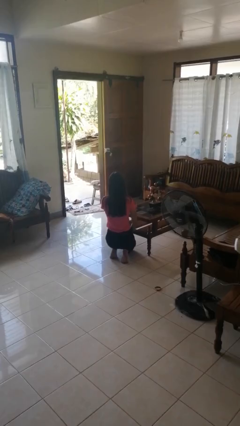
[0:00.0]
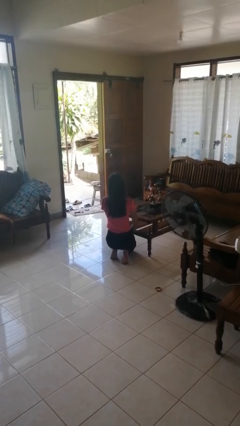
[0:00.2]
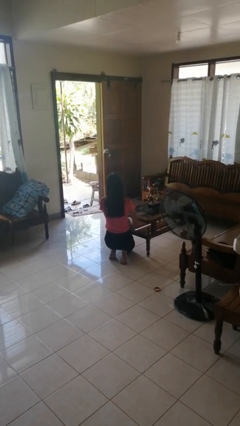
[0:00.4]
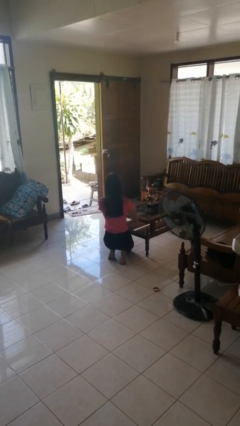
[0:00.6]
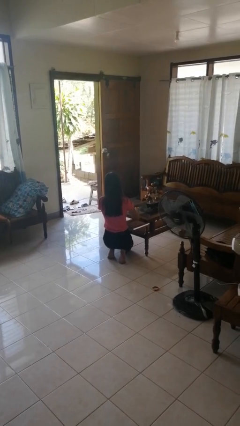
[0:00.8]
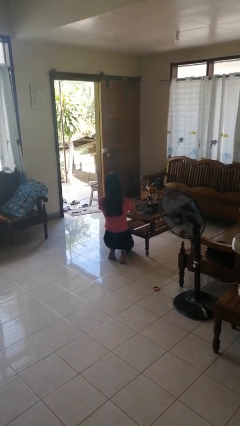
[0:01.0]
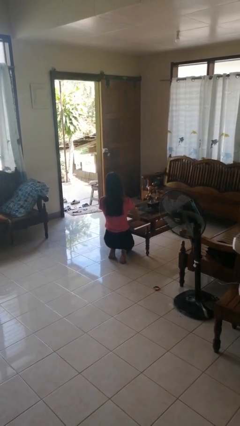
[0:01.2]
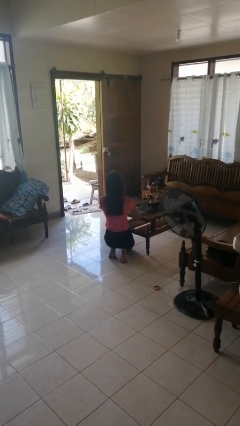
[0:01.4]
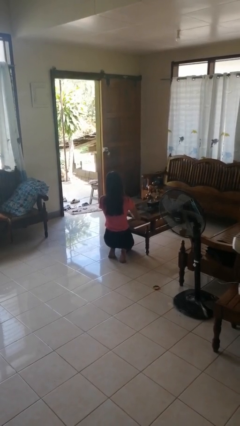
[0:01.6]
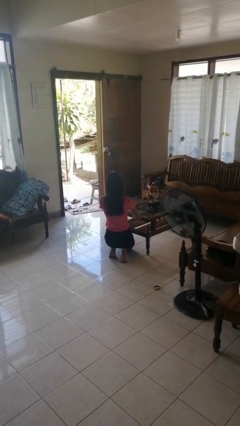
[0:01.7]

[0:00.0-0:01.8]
person cleans table with rag

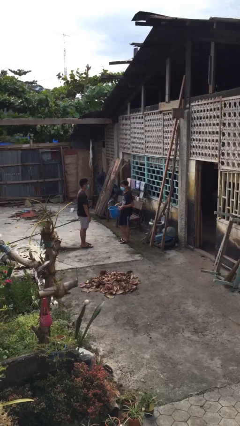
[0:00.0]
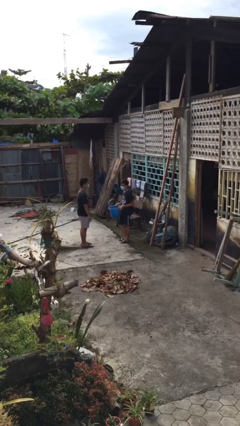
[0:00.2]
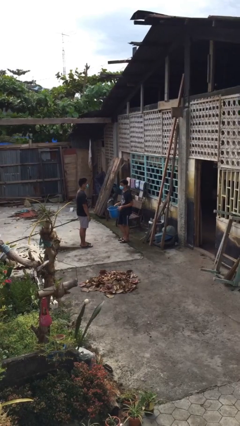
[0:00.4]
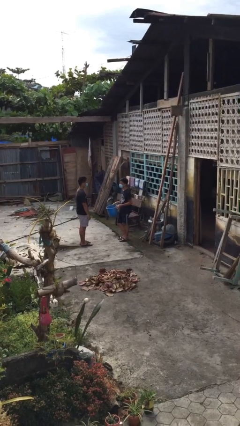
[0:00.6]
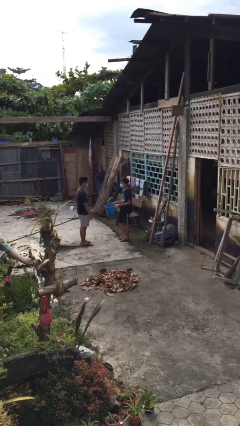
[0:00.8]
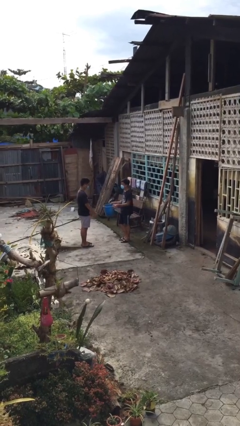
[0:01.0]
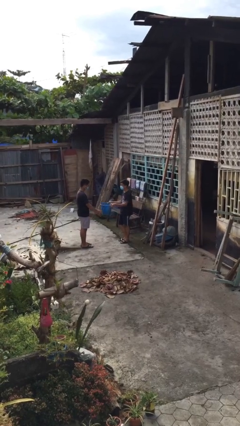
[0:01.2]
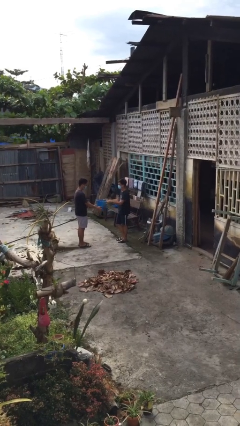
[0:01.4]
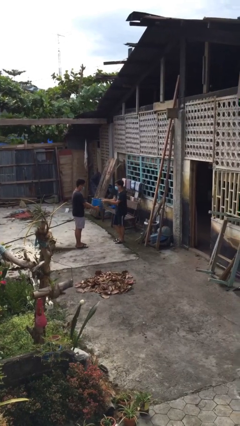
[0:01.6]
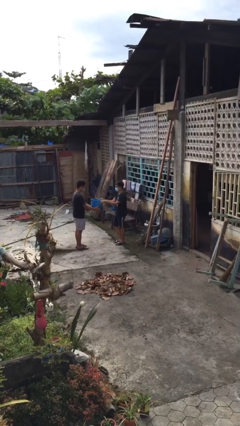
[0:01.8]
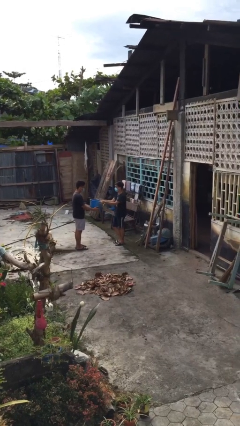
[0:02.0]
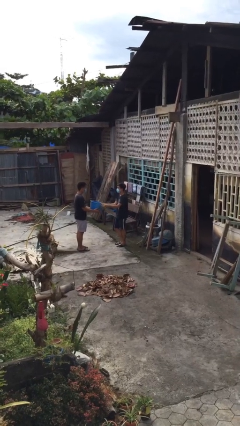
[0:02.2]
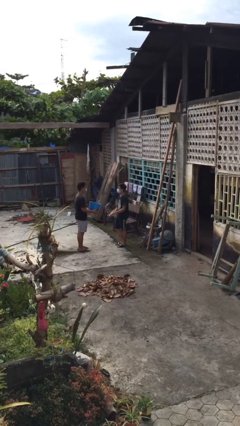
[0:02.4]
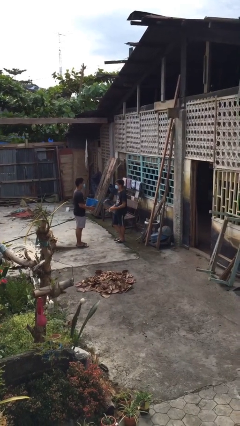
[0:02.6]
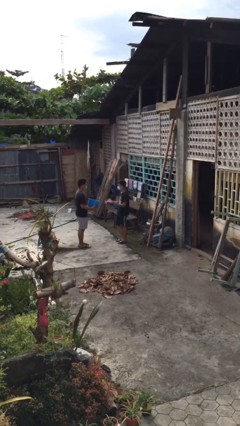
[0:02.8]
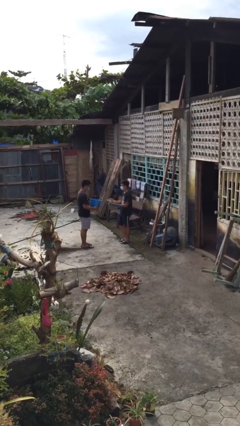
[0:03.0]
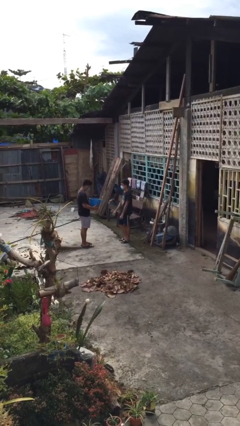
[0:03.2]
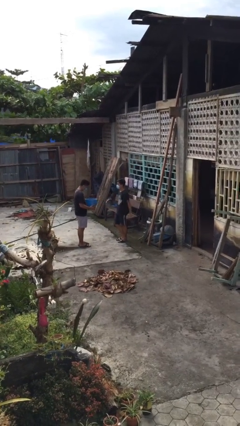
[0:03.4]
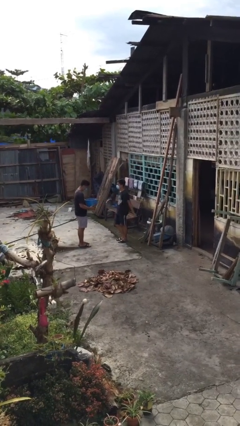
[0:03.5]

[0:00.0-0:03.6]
person transfers object to person

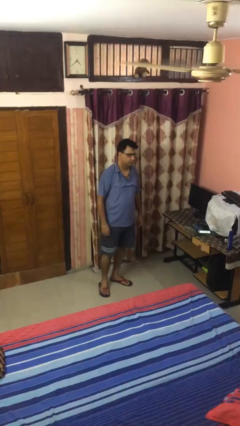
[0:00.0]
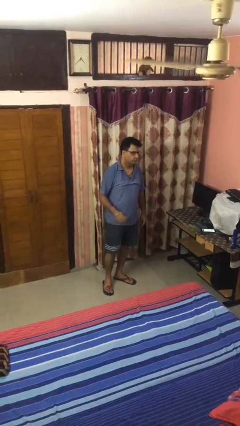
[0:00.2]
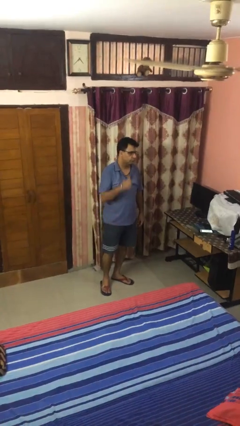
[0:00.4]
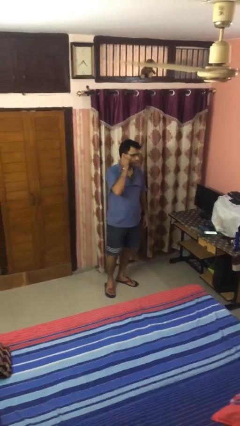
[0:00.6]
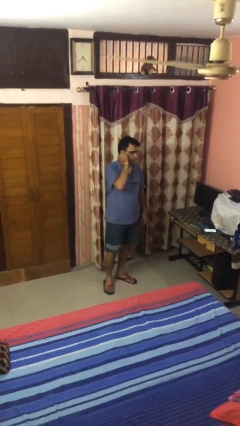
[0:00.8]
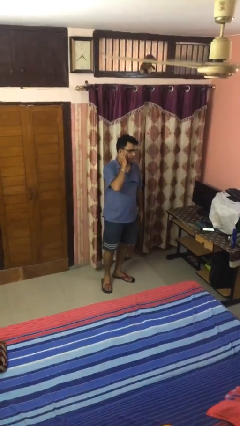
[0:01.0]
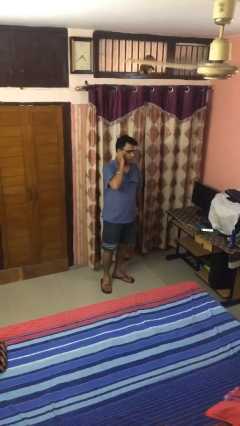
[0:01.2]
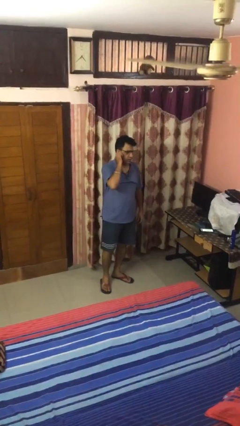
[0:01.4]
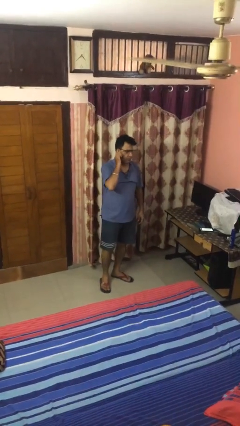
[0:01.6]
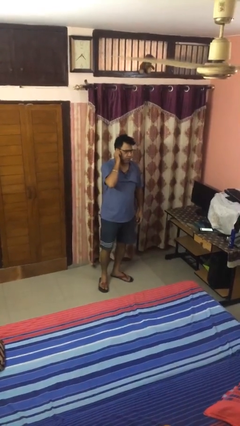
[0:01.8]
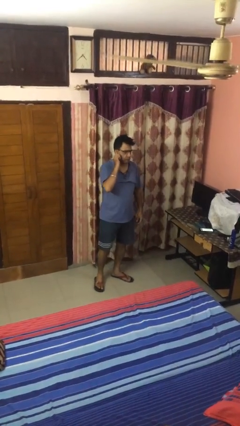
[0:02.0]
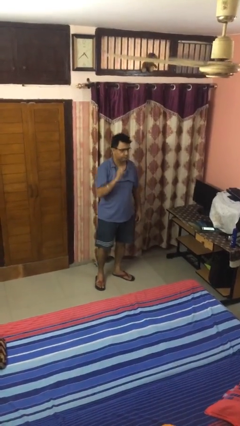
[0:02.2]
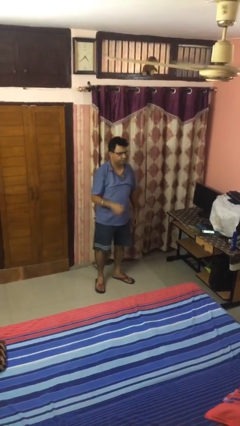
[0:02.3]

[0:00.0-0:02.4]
person touches earlobe

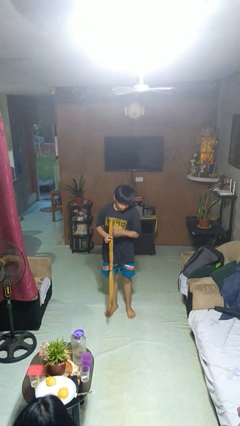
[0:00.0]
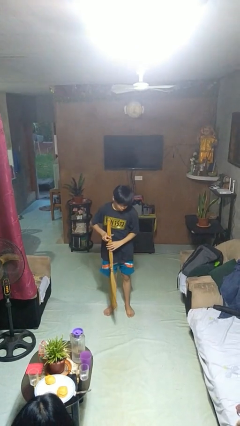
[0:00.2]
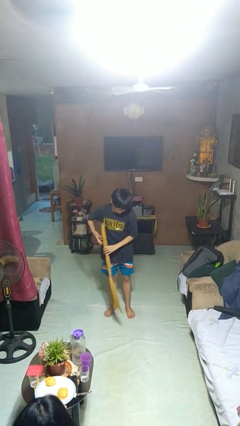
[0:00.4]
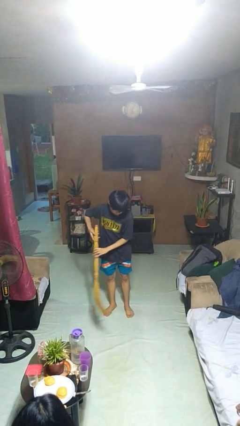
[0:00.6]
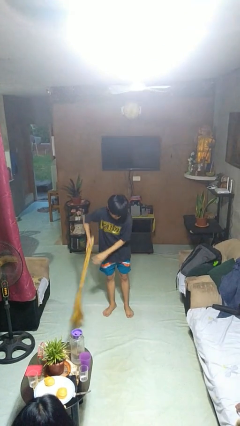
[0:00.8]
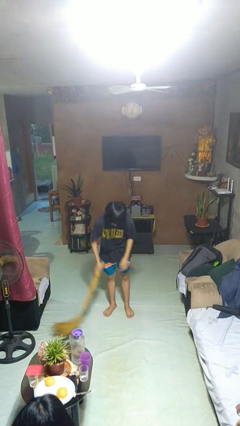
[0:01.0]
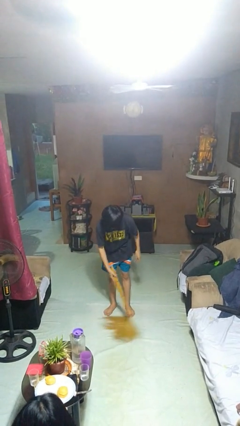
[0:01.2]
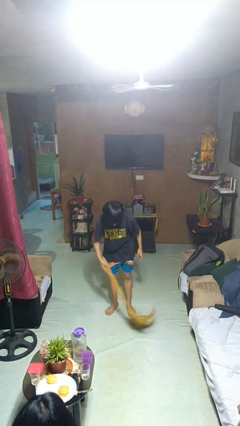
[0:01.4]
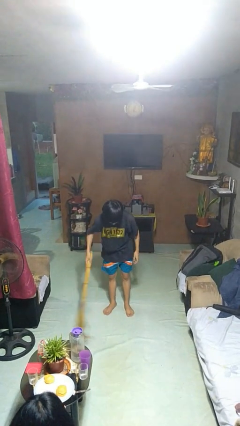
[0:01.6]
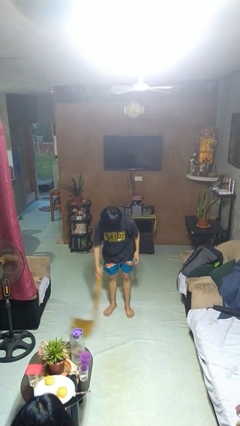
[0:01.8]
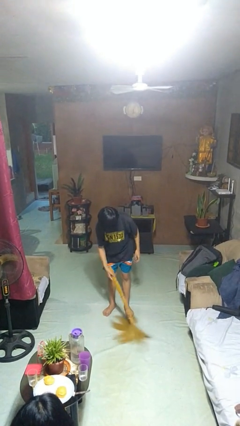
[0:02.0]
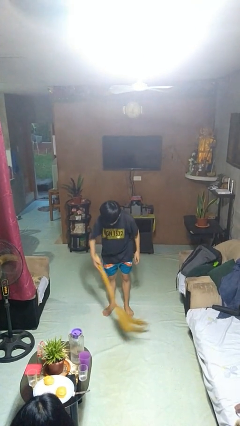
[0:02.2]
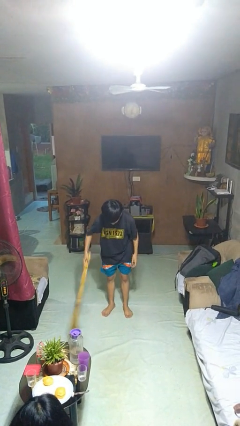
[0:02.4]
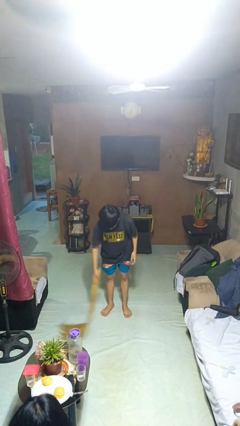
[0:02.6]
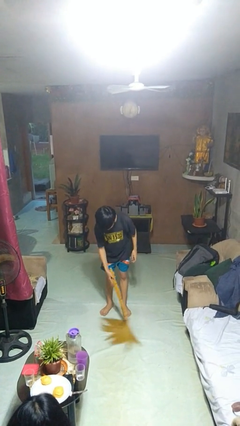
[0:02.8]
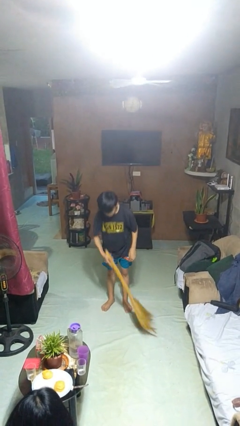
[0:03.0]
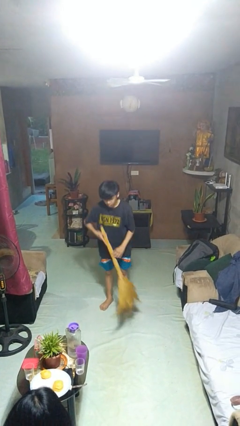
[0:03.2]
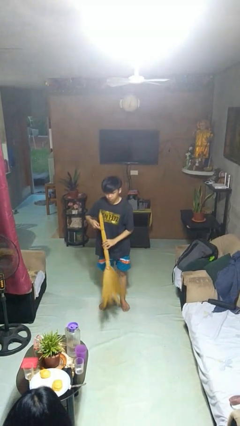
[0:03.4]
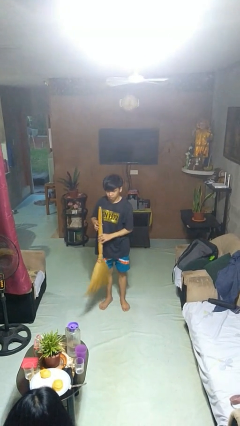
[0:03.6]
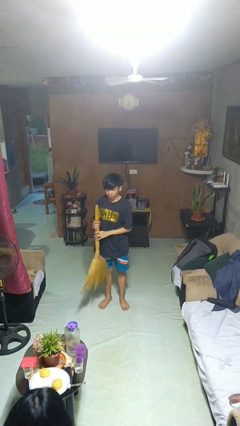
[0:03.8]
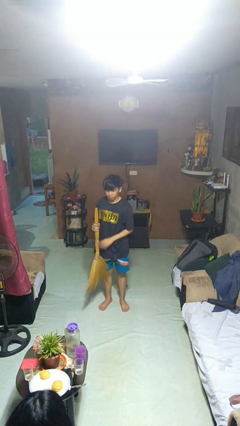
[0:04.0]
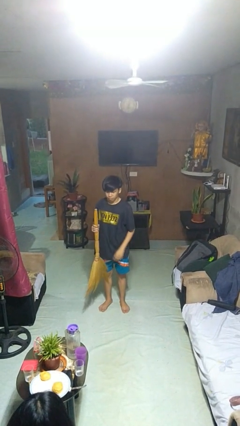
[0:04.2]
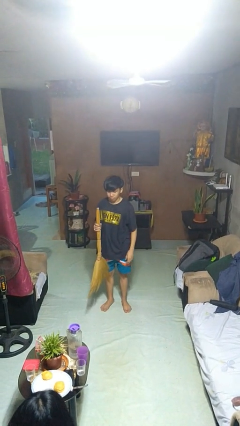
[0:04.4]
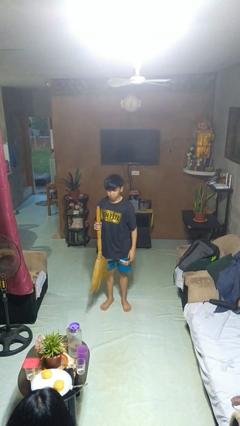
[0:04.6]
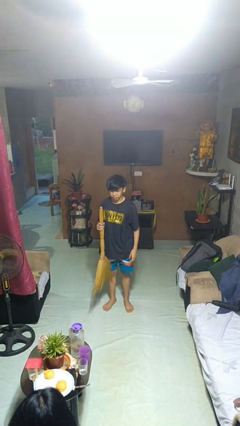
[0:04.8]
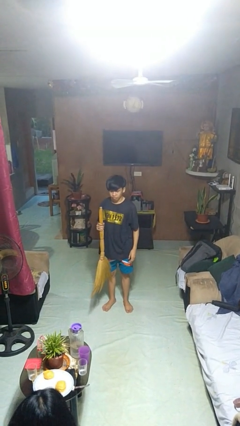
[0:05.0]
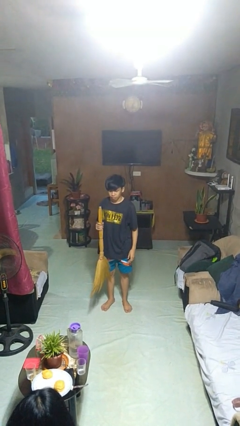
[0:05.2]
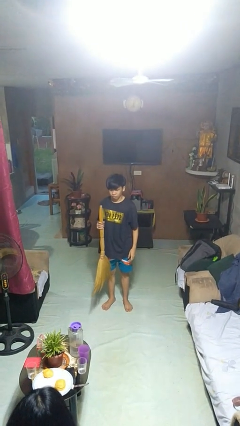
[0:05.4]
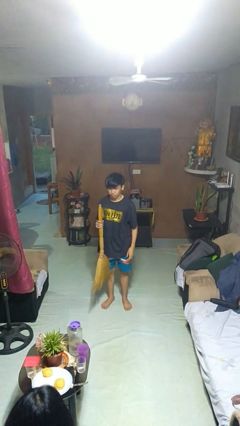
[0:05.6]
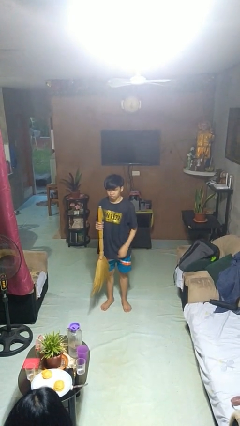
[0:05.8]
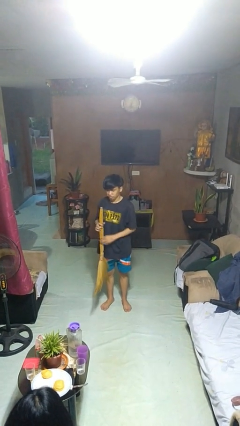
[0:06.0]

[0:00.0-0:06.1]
person sweeps floor

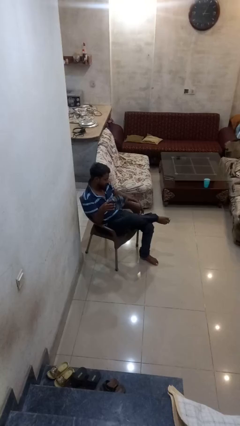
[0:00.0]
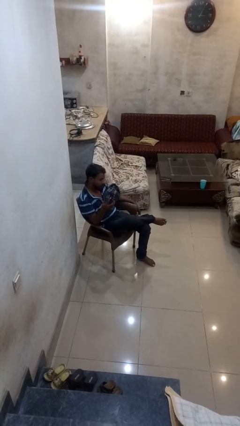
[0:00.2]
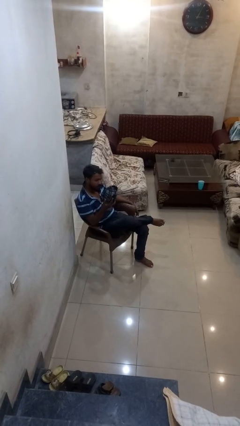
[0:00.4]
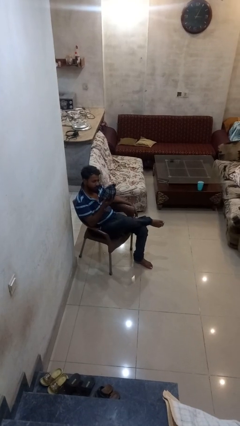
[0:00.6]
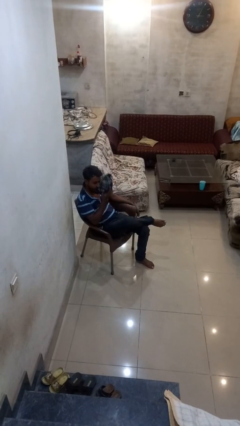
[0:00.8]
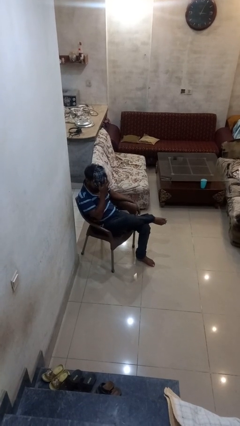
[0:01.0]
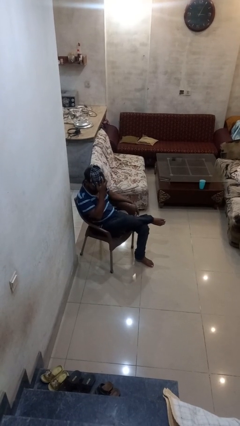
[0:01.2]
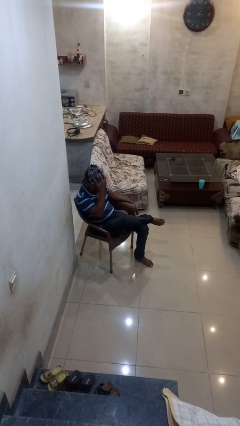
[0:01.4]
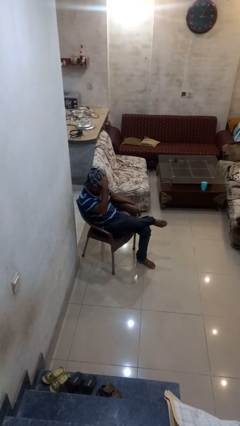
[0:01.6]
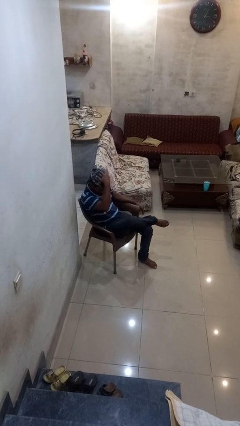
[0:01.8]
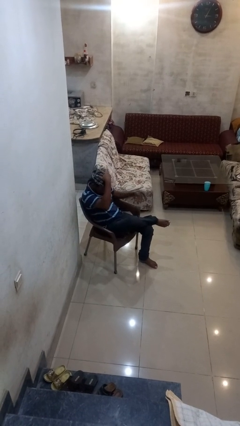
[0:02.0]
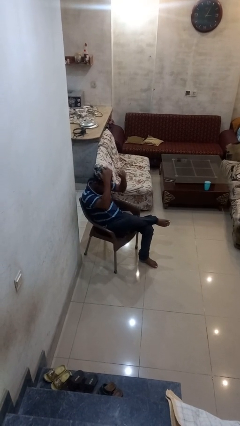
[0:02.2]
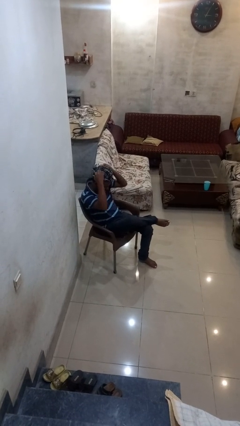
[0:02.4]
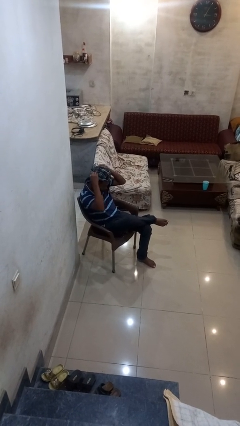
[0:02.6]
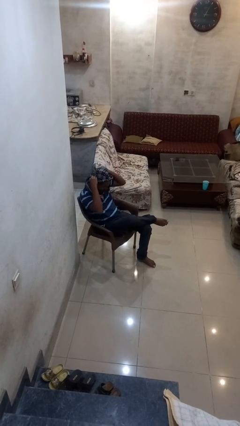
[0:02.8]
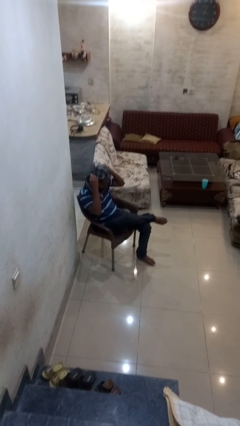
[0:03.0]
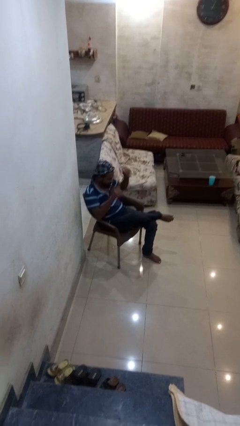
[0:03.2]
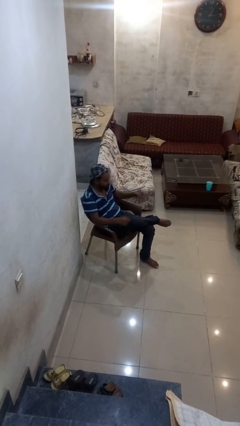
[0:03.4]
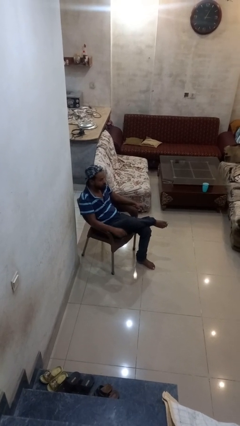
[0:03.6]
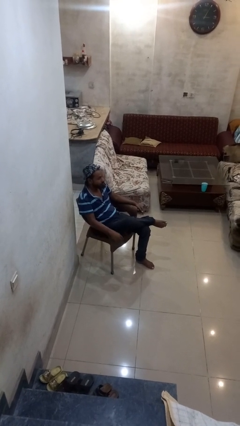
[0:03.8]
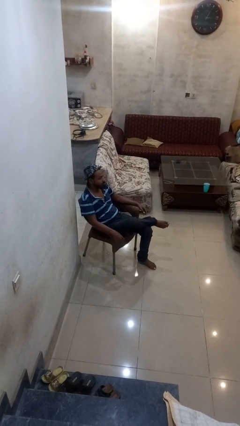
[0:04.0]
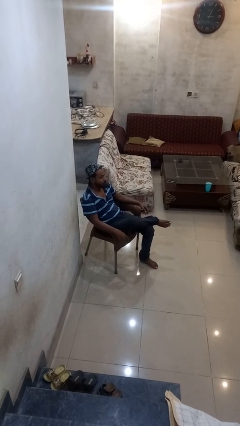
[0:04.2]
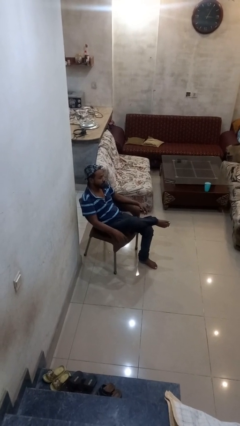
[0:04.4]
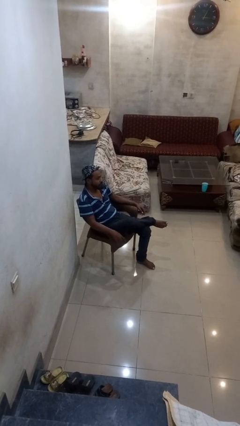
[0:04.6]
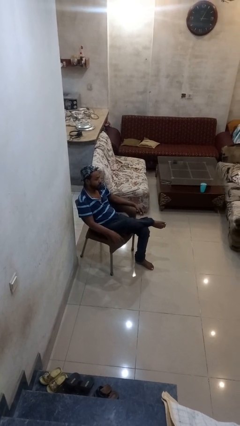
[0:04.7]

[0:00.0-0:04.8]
person puts on hat
